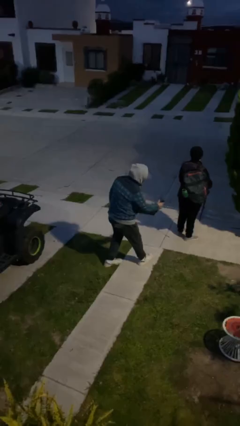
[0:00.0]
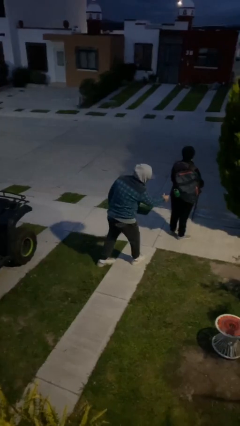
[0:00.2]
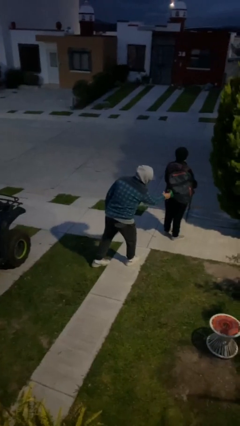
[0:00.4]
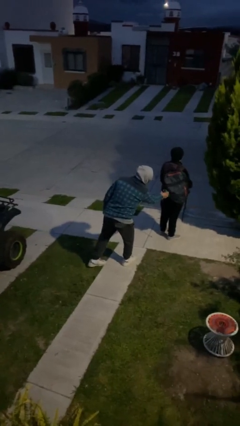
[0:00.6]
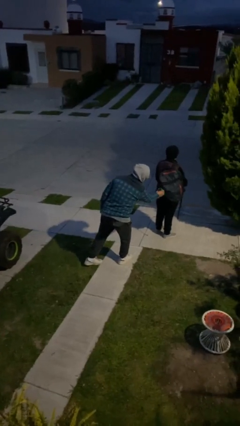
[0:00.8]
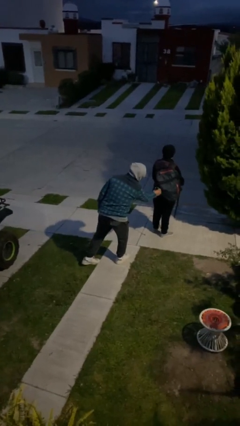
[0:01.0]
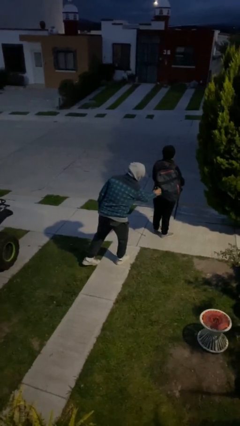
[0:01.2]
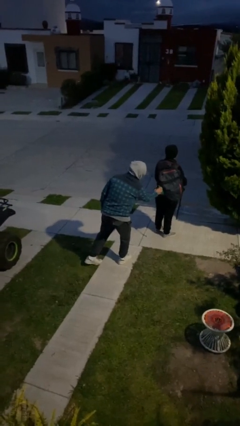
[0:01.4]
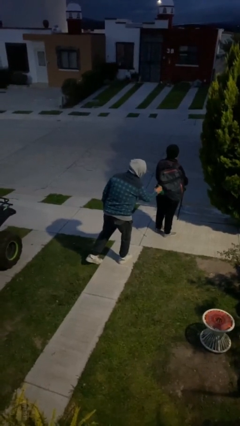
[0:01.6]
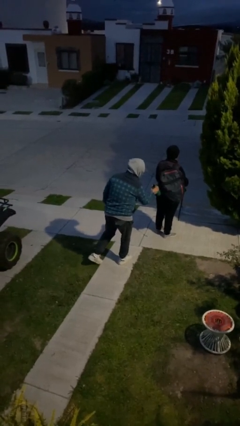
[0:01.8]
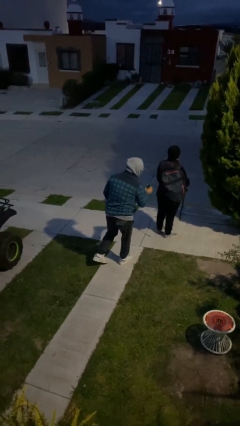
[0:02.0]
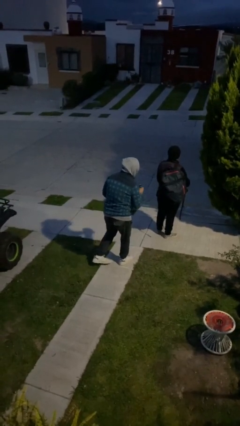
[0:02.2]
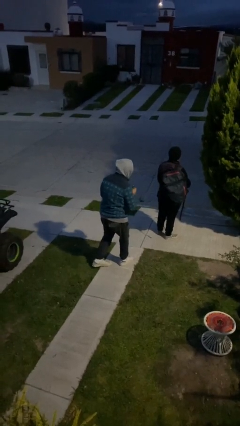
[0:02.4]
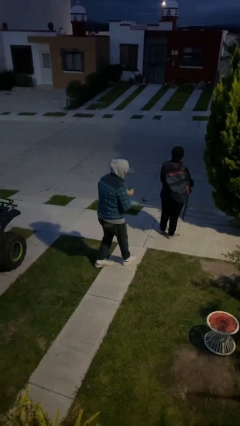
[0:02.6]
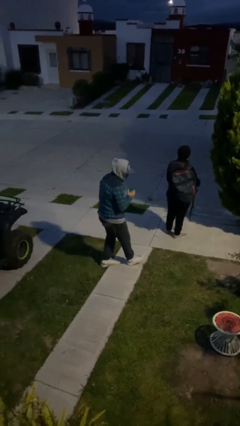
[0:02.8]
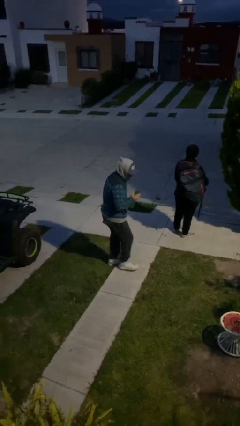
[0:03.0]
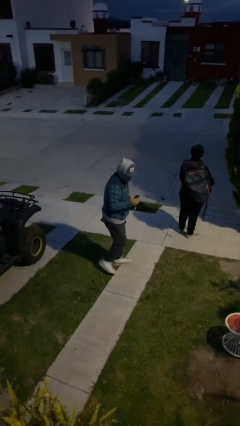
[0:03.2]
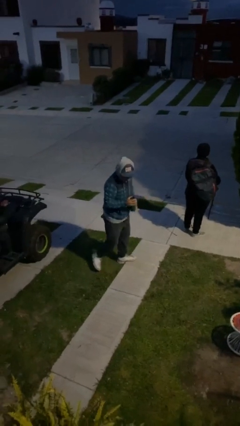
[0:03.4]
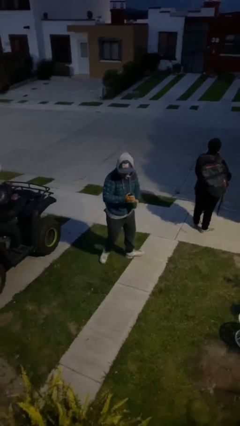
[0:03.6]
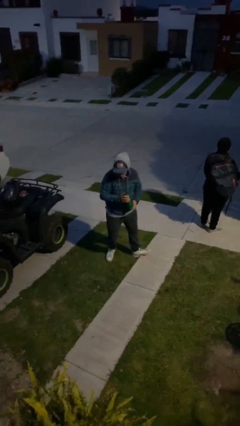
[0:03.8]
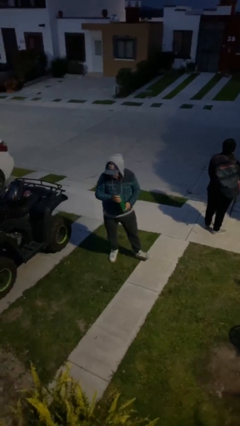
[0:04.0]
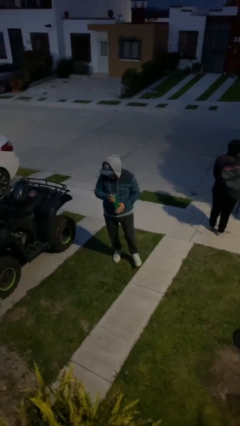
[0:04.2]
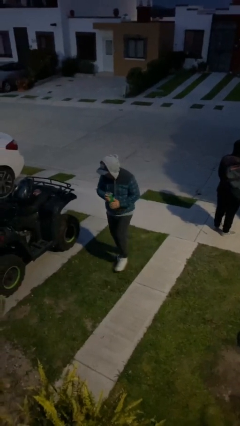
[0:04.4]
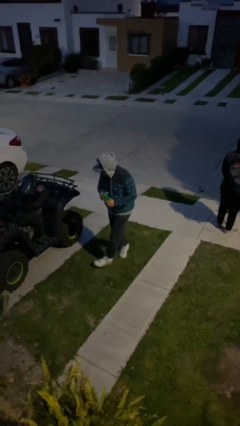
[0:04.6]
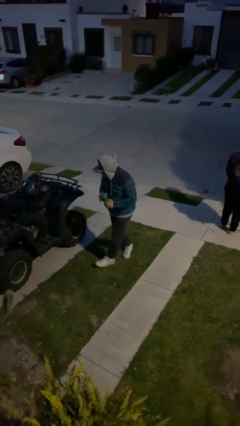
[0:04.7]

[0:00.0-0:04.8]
person steals object from person

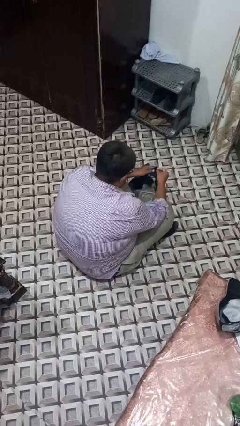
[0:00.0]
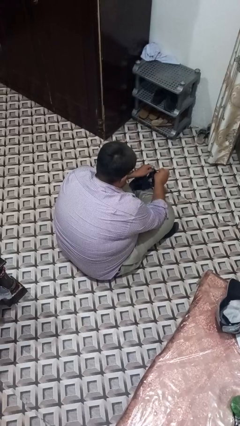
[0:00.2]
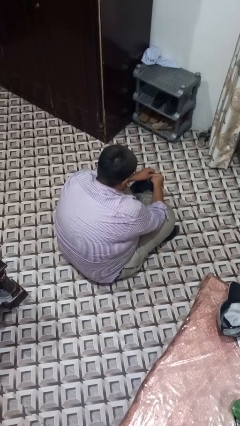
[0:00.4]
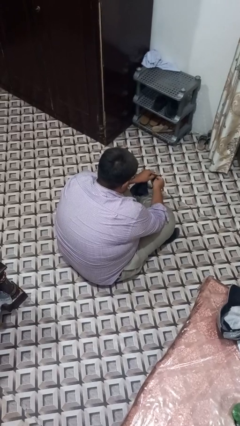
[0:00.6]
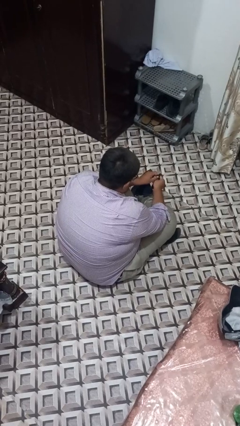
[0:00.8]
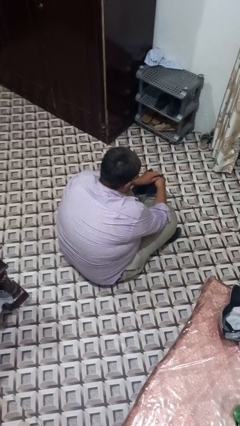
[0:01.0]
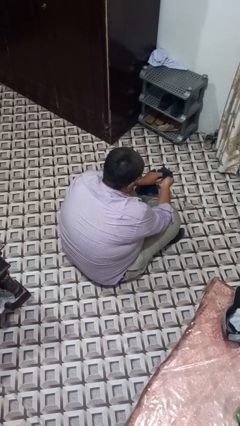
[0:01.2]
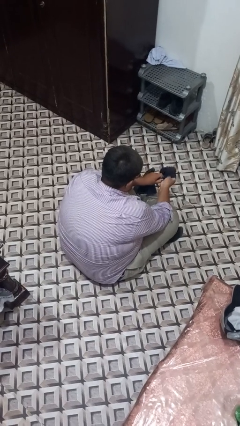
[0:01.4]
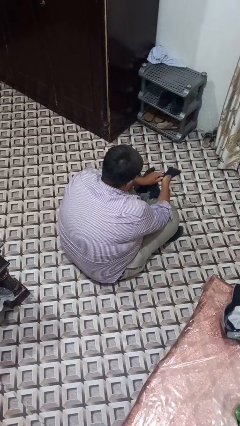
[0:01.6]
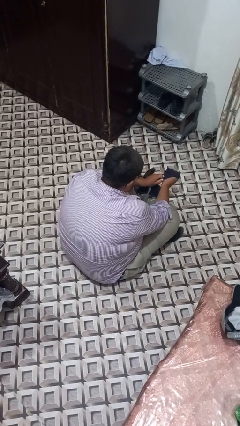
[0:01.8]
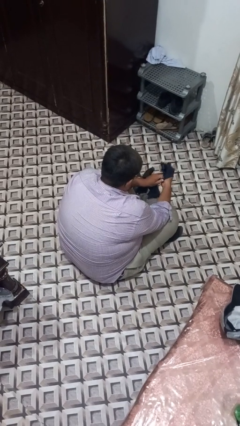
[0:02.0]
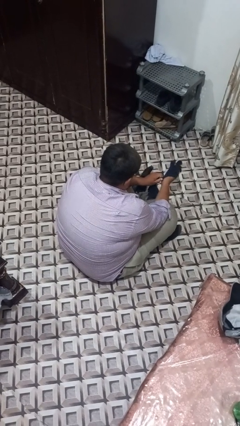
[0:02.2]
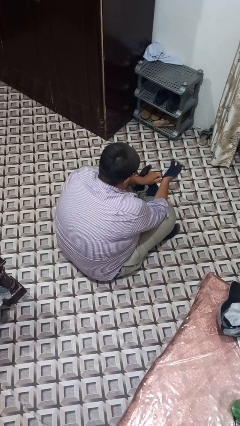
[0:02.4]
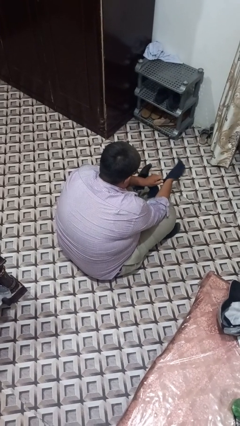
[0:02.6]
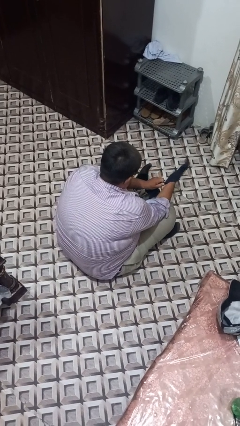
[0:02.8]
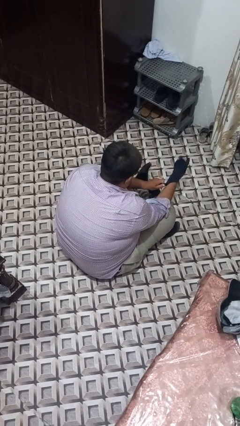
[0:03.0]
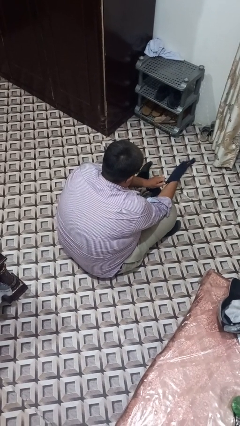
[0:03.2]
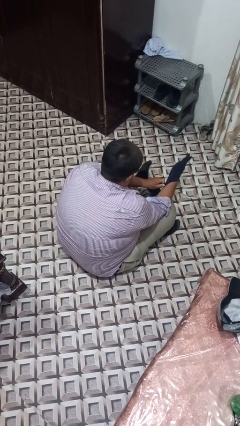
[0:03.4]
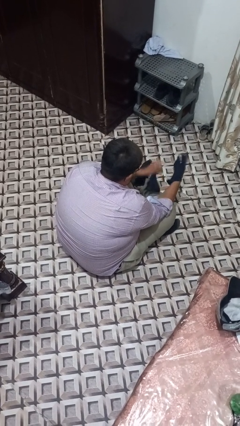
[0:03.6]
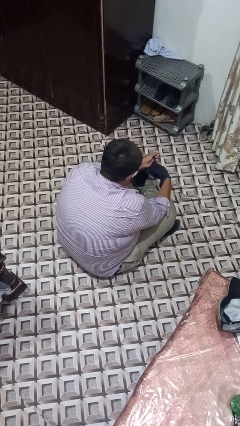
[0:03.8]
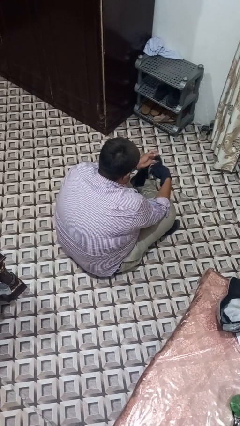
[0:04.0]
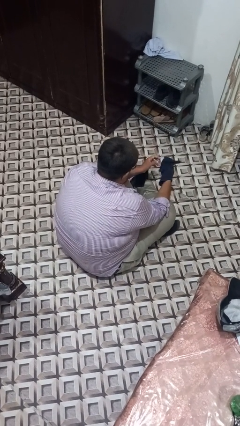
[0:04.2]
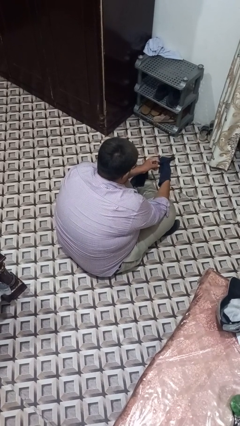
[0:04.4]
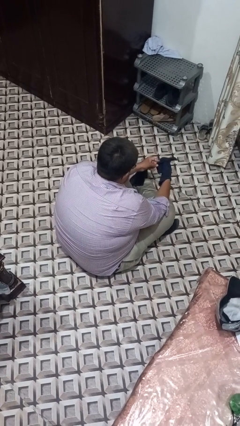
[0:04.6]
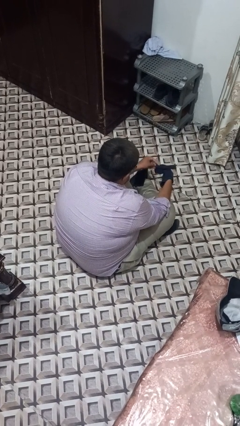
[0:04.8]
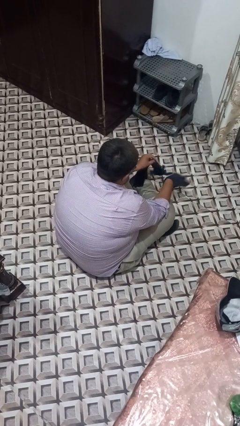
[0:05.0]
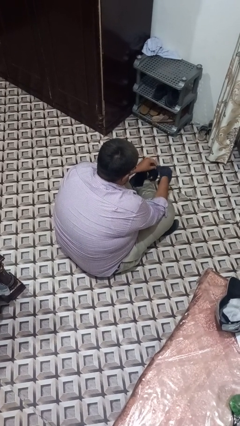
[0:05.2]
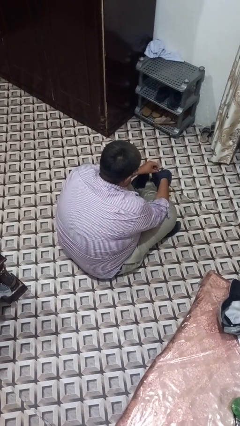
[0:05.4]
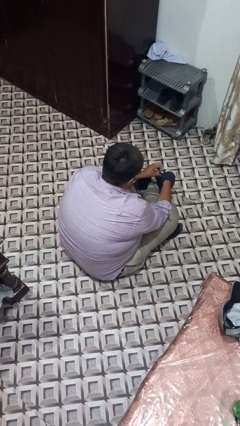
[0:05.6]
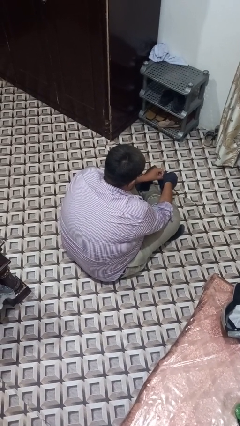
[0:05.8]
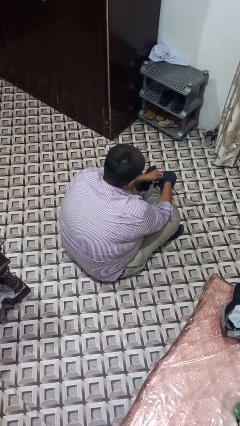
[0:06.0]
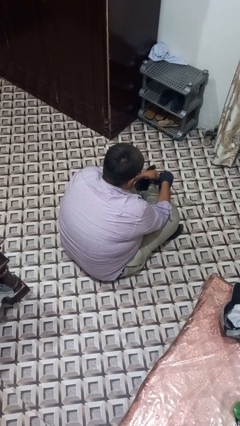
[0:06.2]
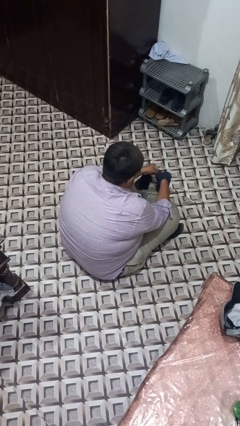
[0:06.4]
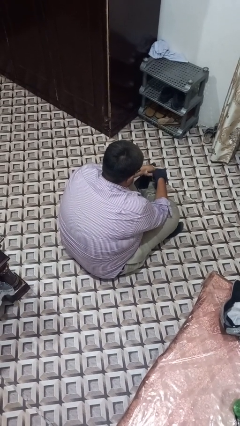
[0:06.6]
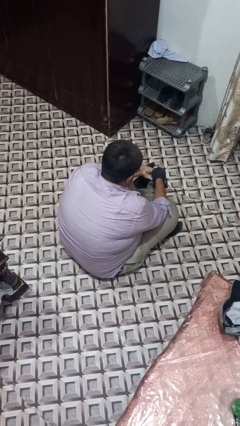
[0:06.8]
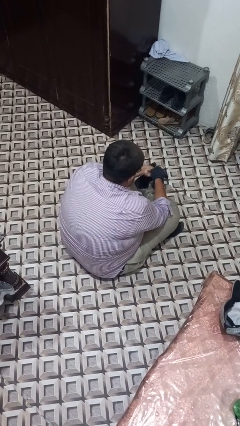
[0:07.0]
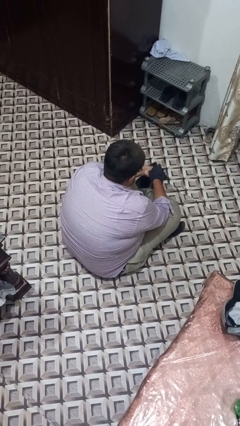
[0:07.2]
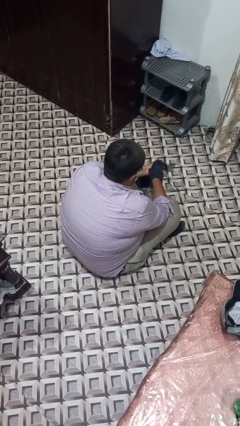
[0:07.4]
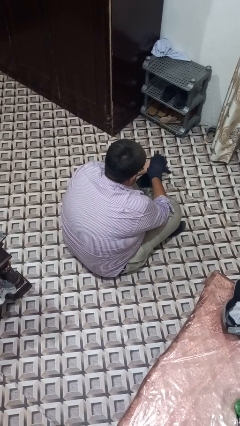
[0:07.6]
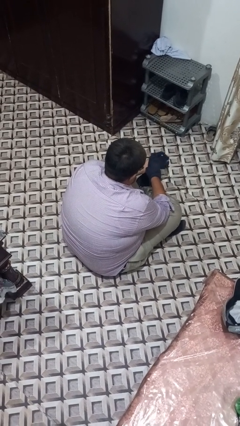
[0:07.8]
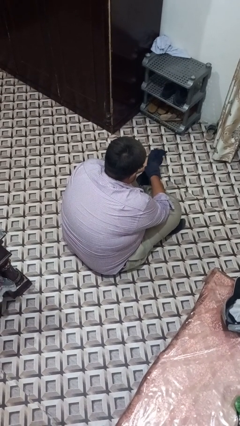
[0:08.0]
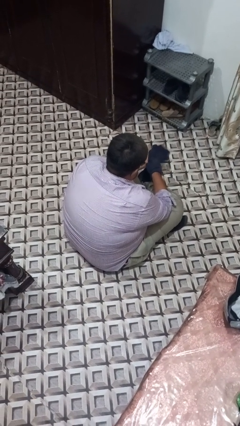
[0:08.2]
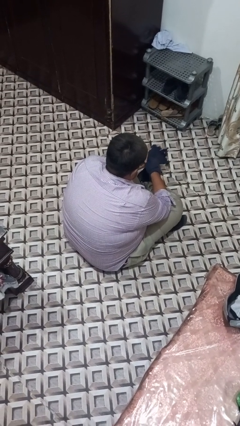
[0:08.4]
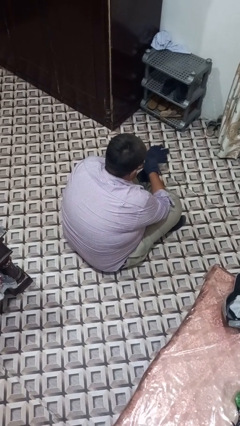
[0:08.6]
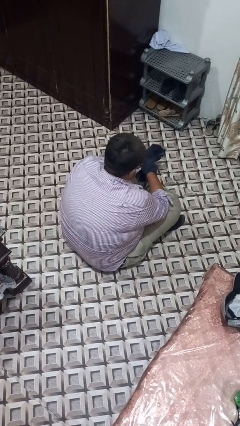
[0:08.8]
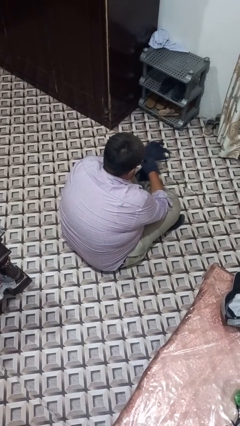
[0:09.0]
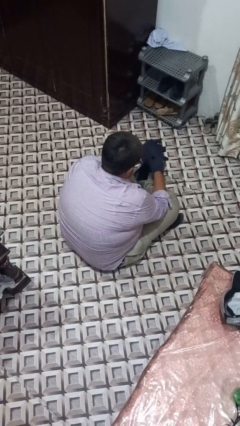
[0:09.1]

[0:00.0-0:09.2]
person puts on gloves

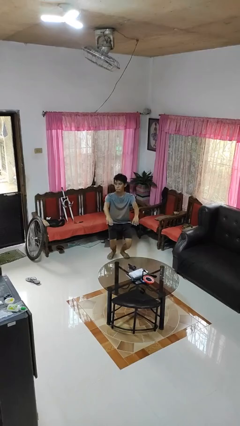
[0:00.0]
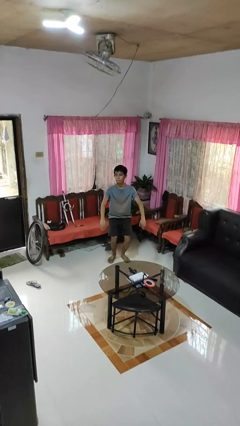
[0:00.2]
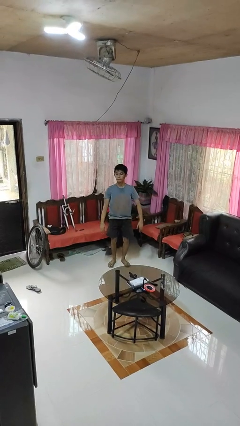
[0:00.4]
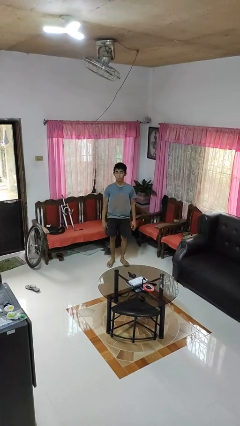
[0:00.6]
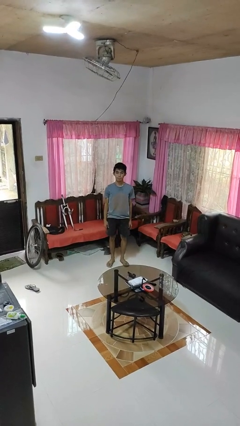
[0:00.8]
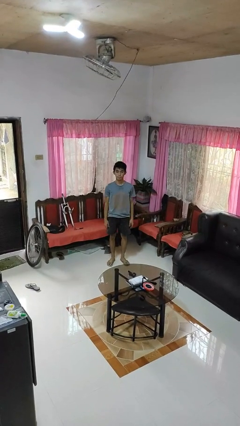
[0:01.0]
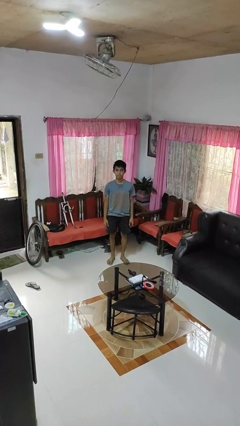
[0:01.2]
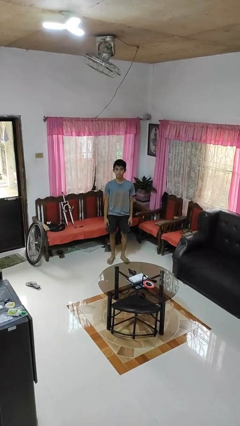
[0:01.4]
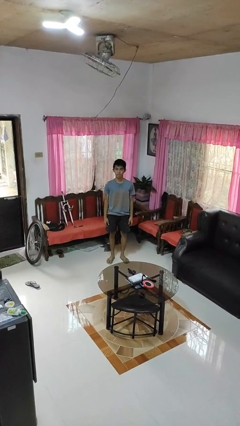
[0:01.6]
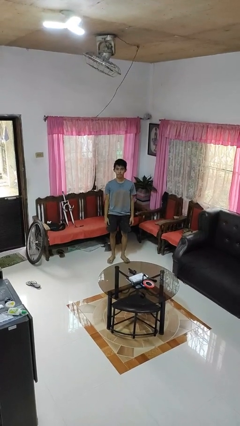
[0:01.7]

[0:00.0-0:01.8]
person stands up

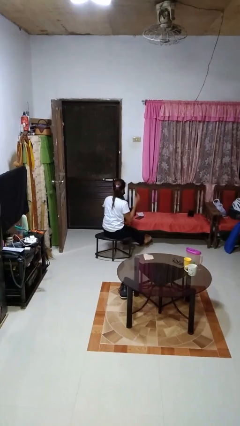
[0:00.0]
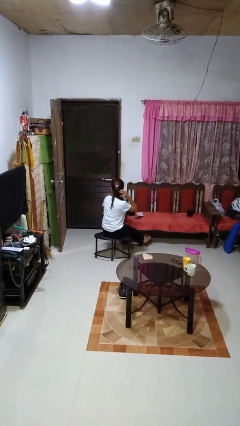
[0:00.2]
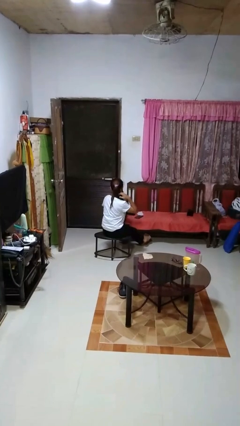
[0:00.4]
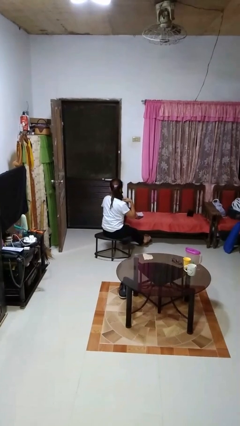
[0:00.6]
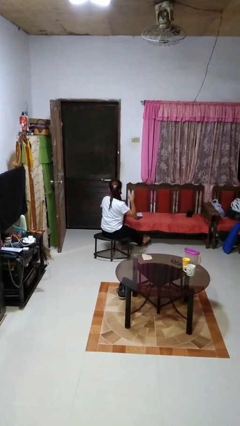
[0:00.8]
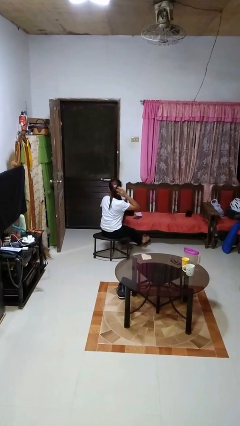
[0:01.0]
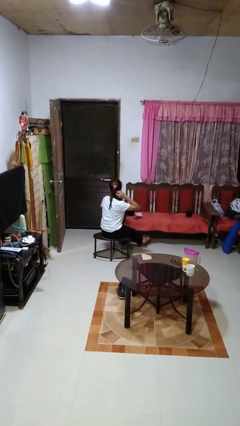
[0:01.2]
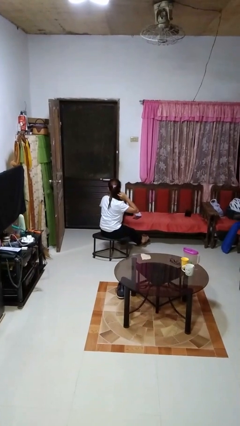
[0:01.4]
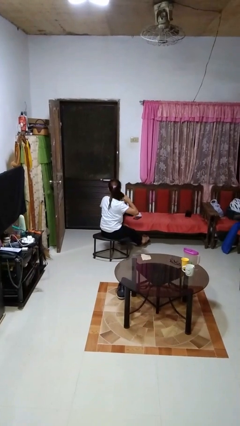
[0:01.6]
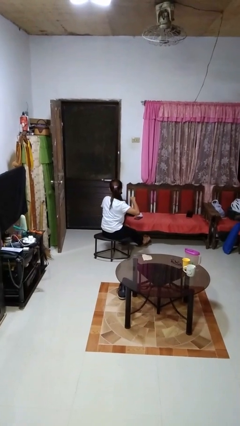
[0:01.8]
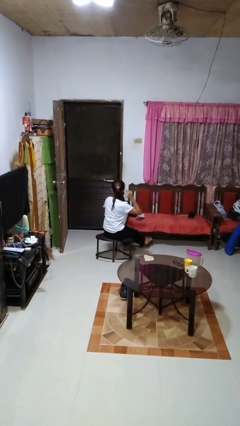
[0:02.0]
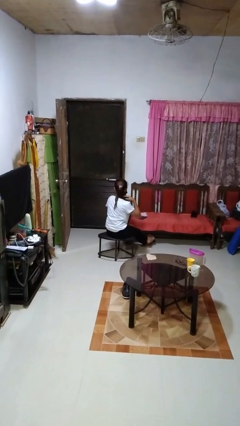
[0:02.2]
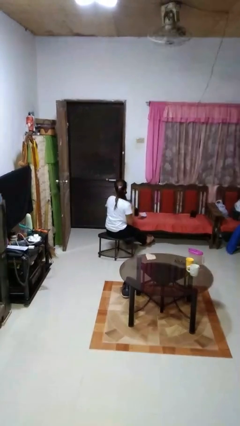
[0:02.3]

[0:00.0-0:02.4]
person strokes hair
